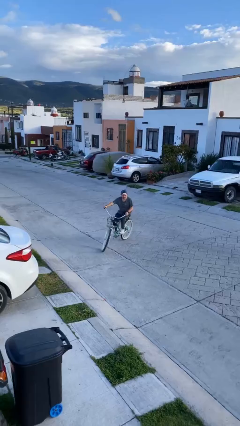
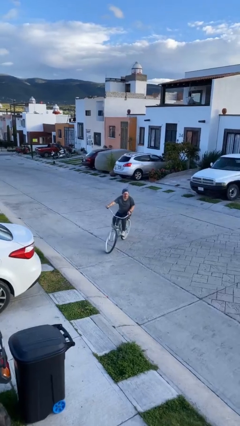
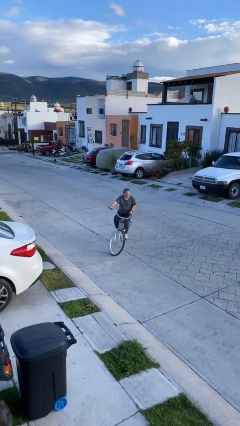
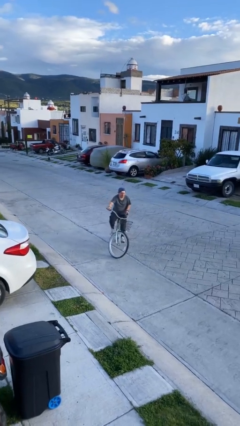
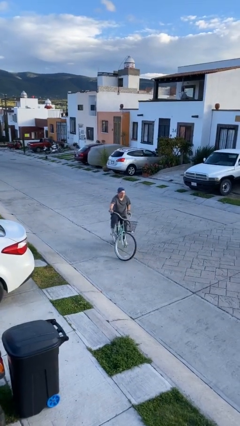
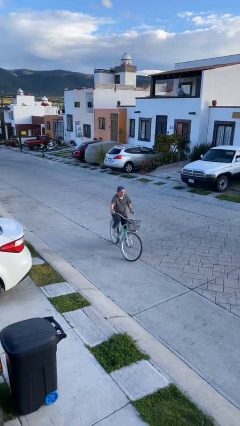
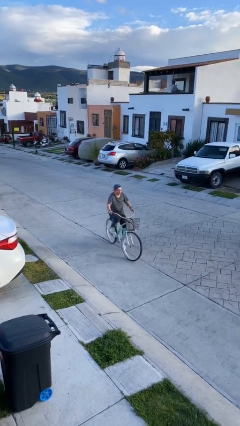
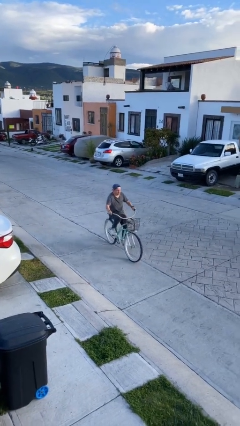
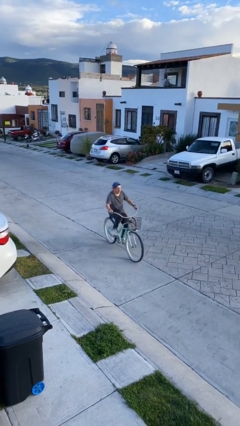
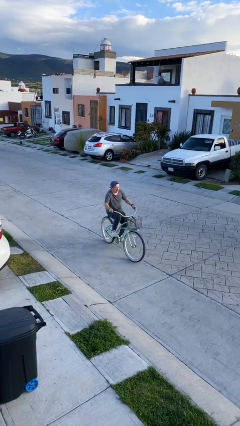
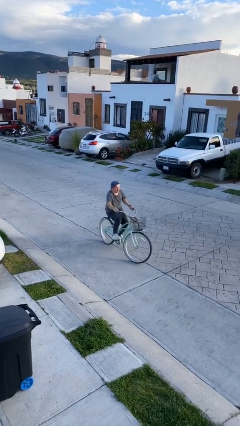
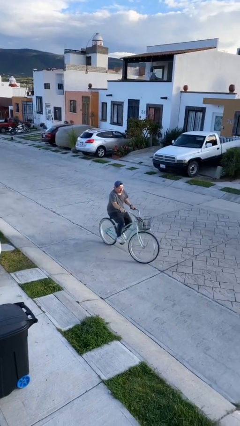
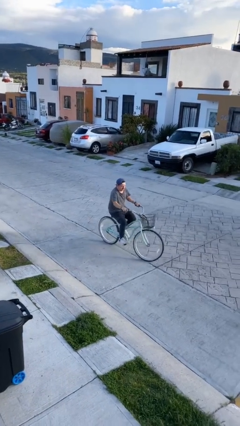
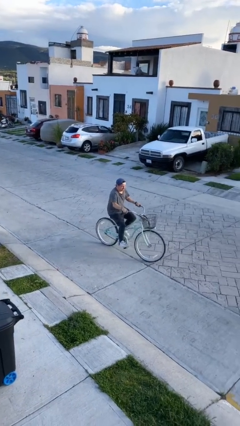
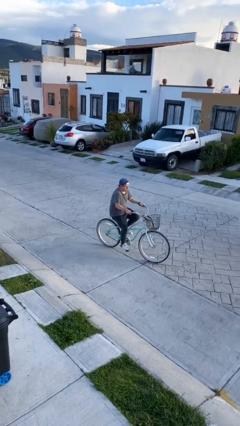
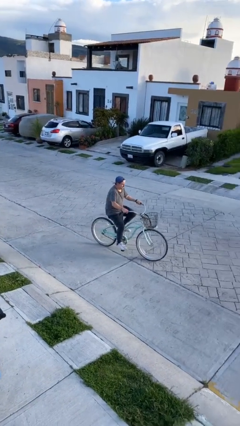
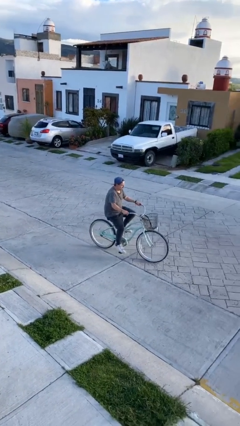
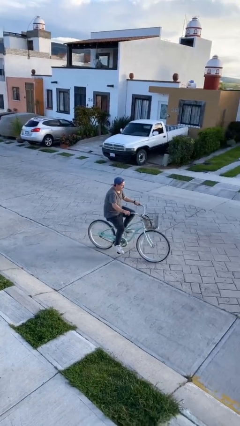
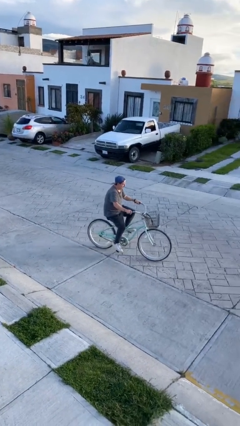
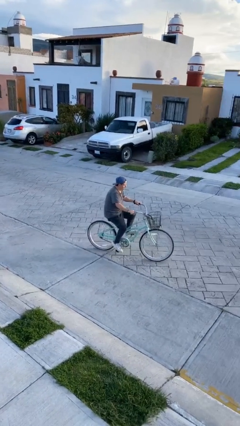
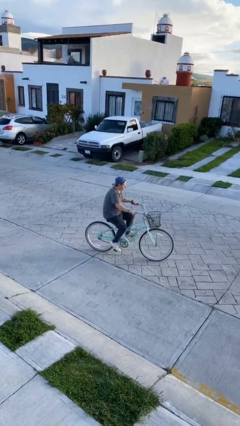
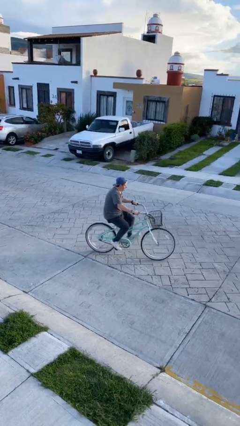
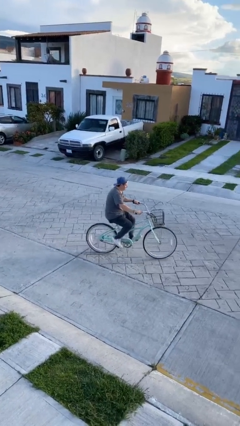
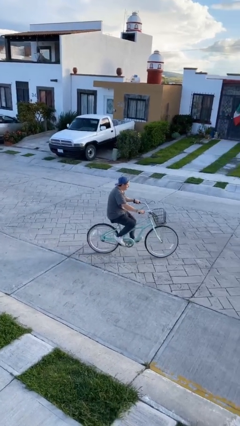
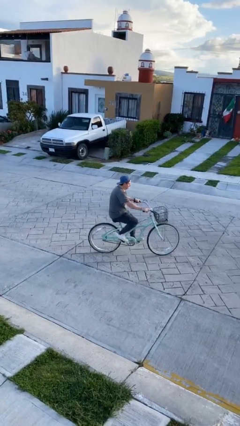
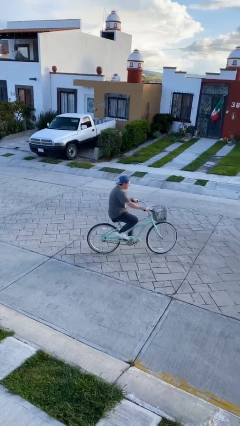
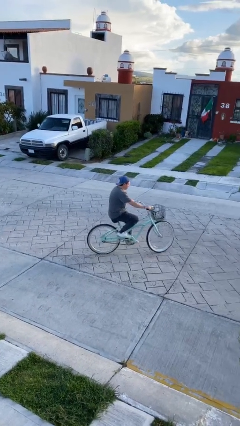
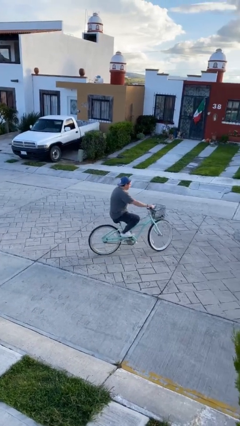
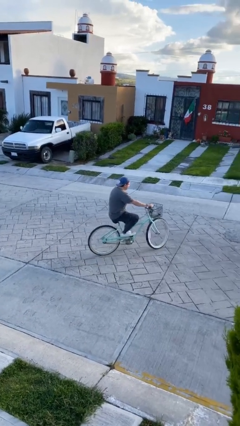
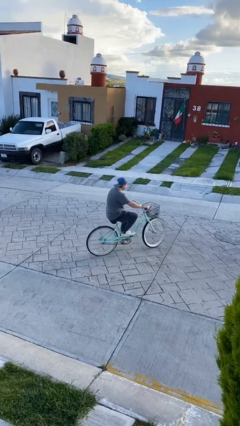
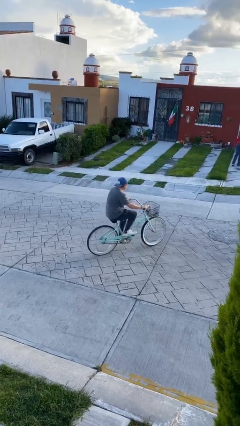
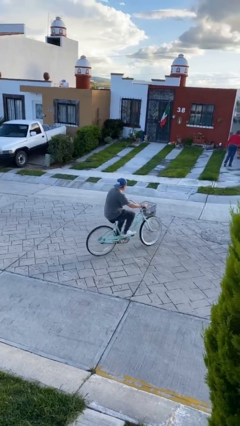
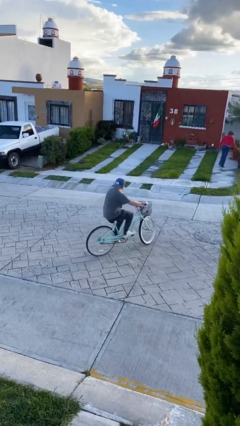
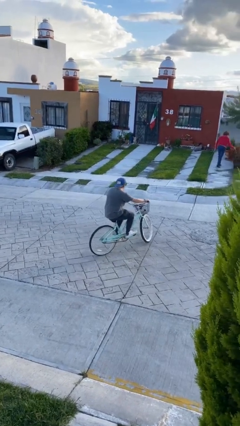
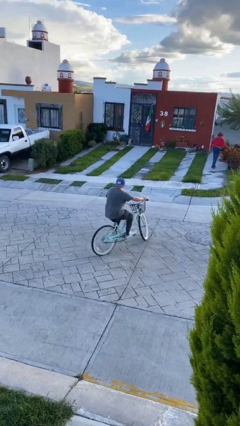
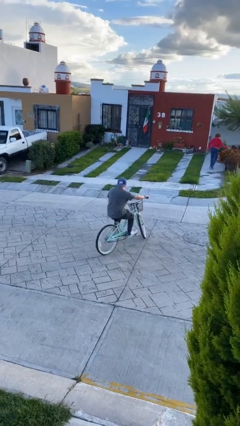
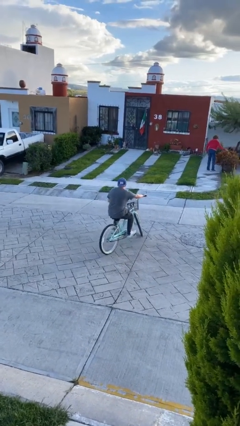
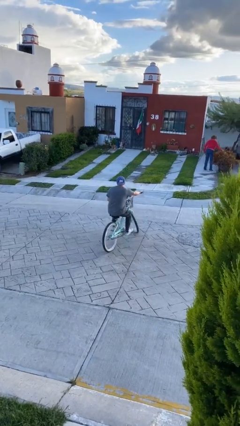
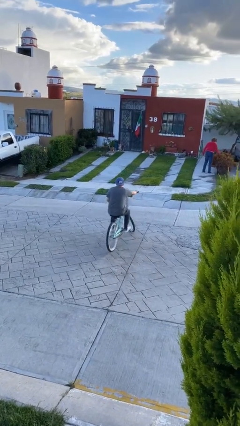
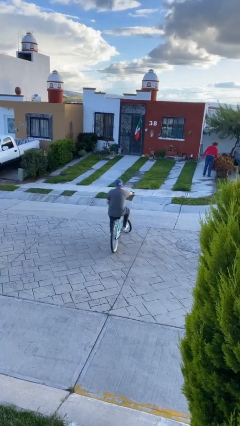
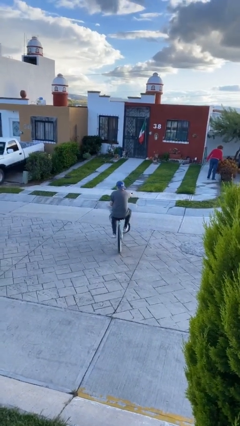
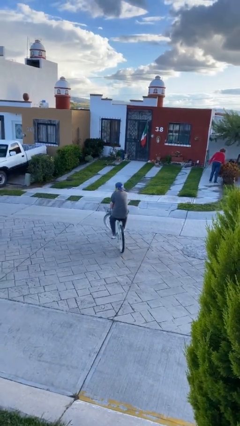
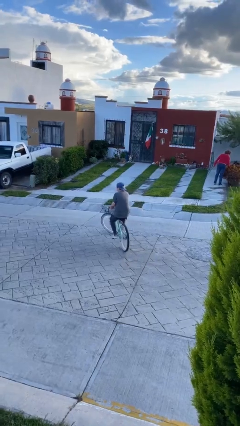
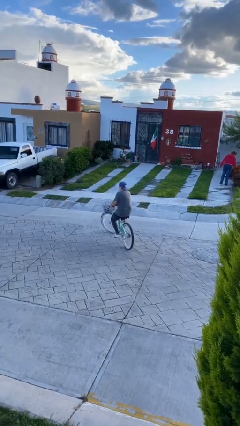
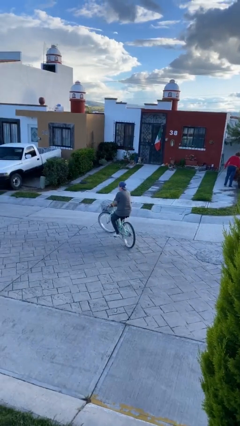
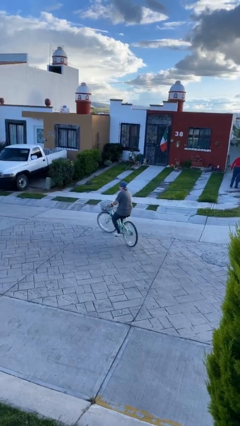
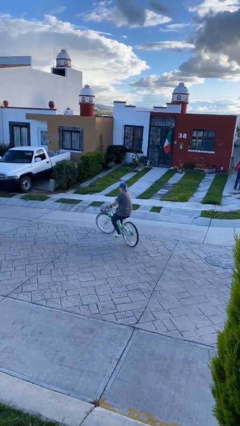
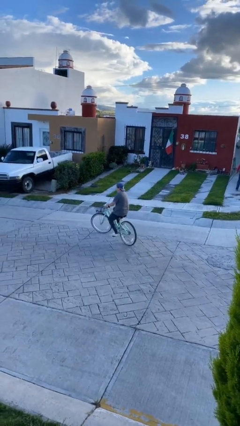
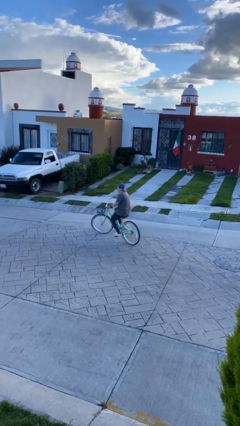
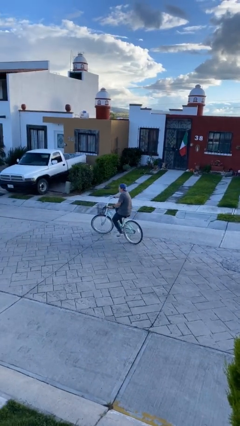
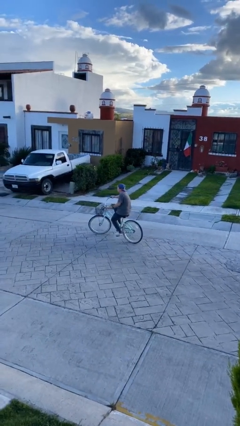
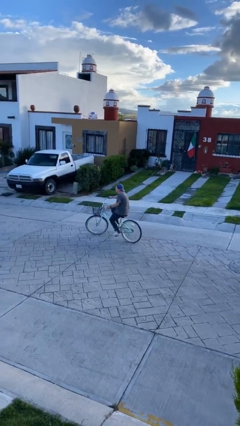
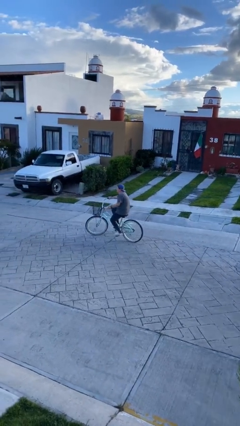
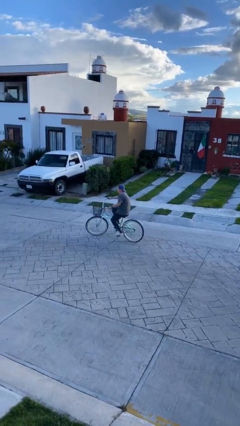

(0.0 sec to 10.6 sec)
person rides bicycle

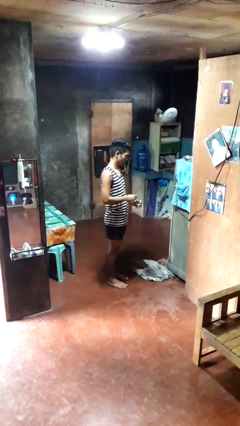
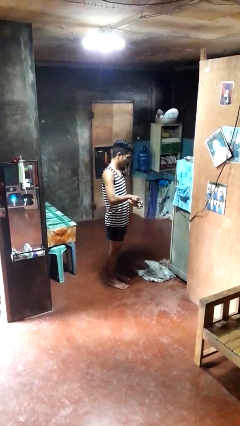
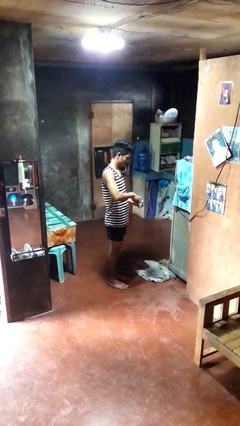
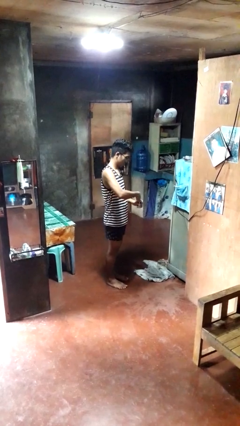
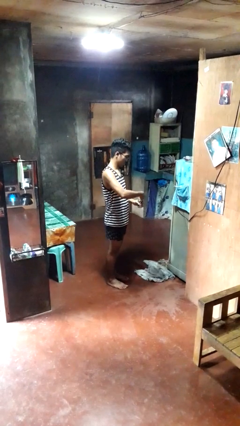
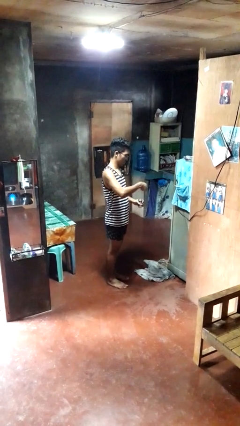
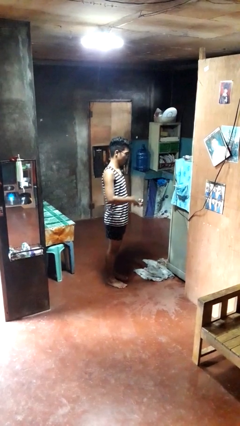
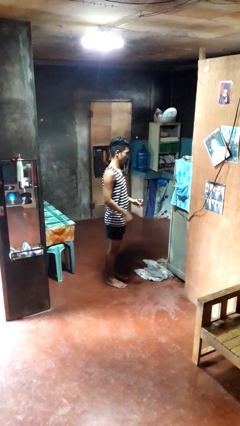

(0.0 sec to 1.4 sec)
person opens beverage can

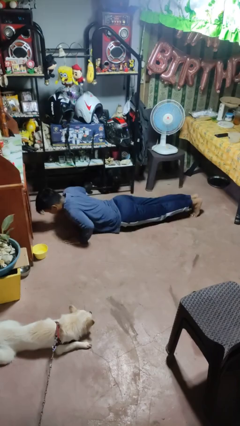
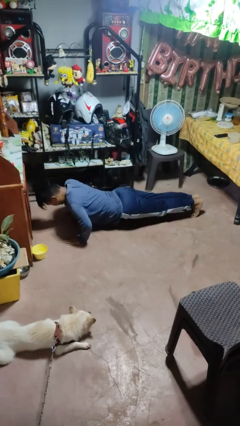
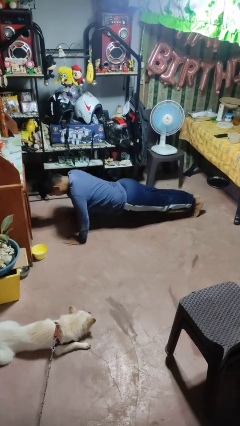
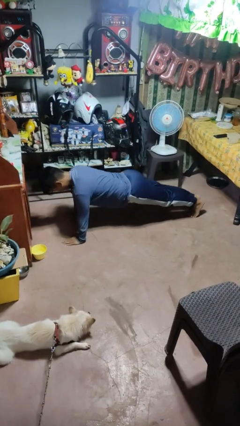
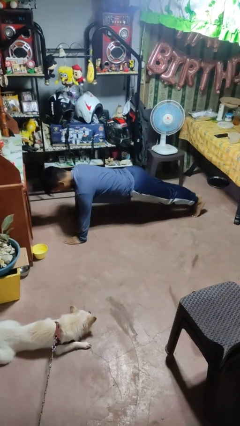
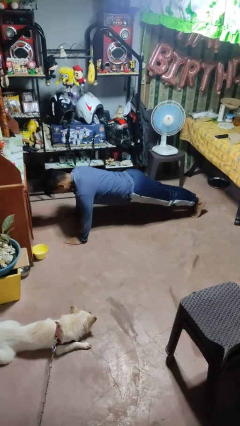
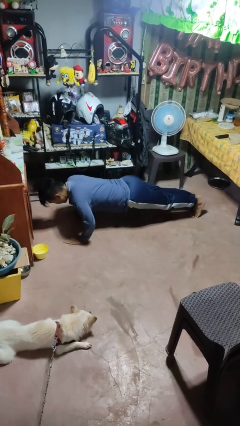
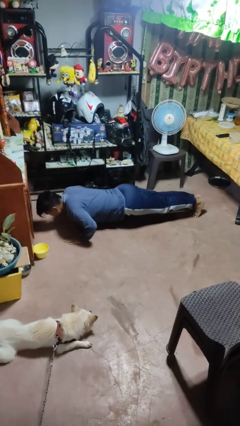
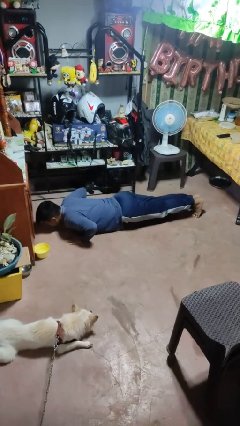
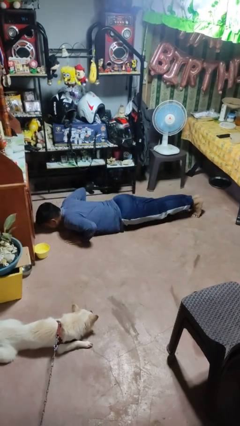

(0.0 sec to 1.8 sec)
person exercises with pushup

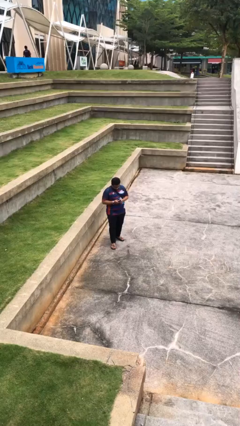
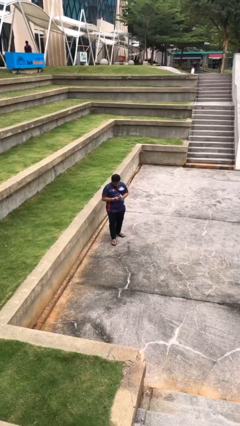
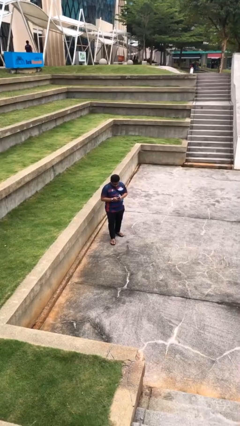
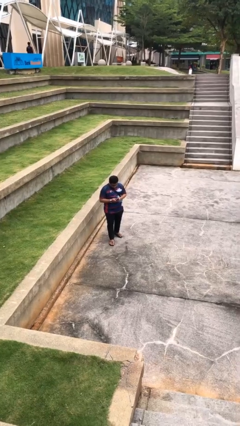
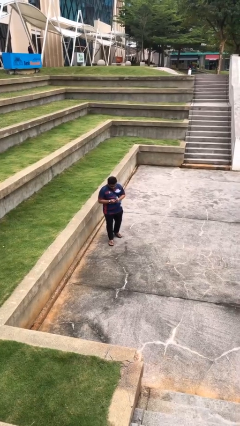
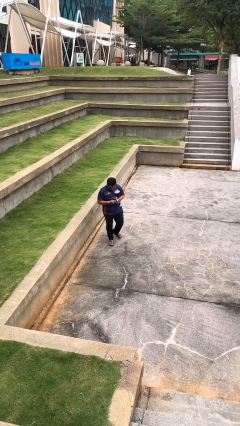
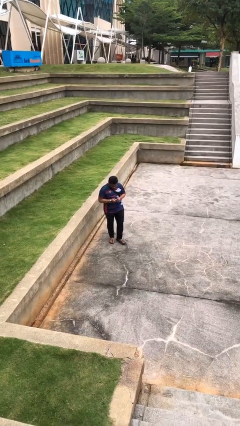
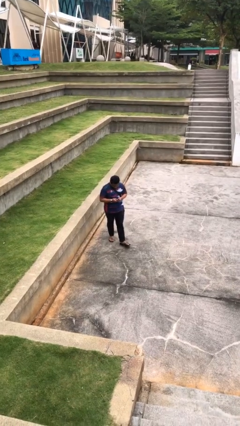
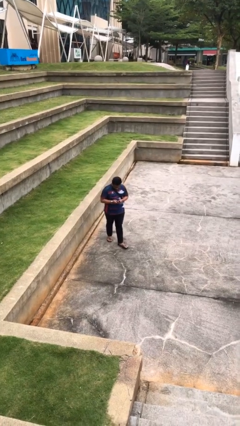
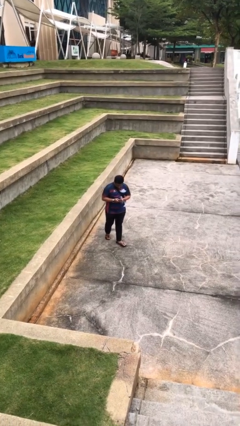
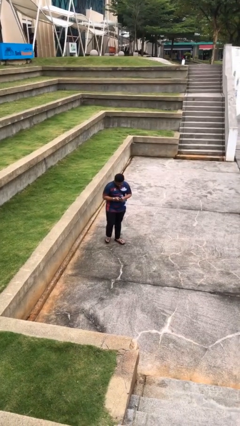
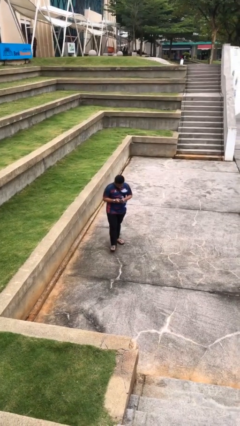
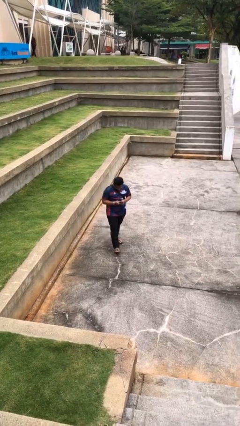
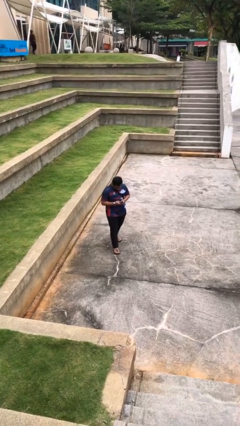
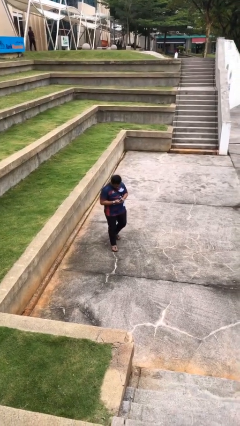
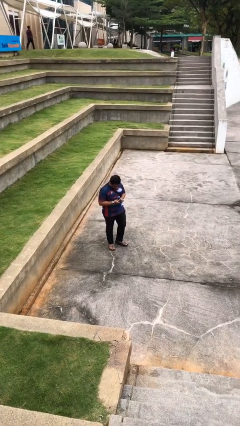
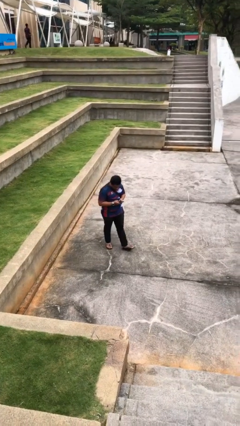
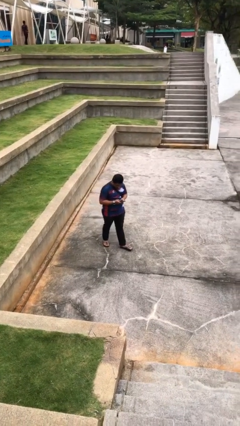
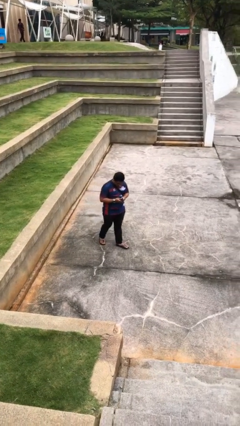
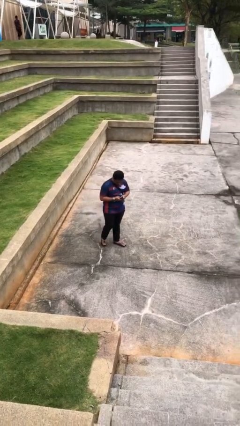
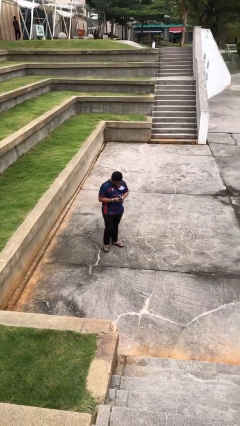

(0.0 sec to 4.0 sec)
person texts on phone
